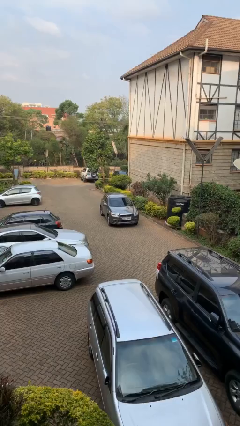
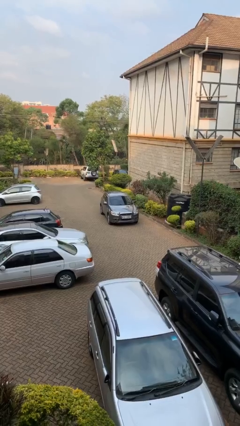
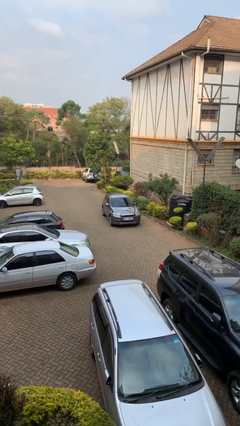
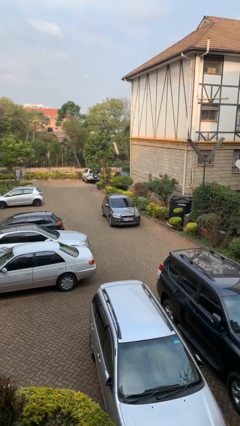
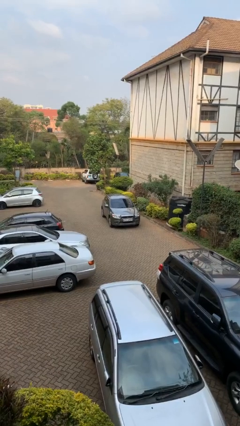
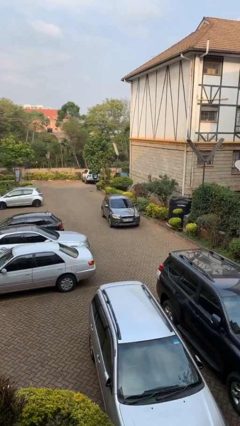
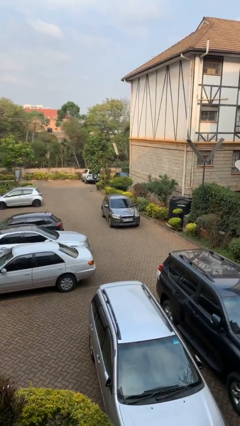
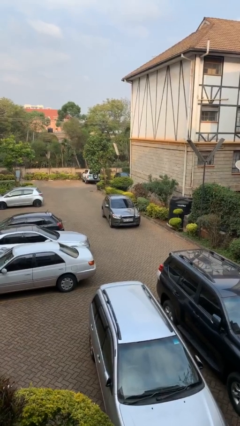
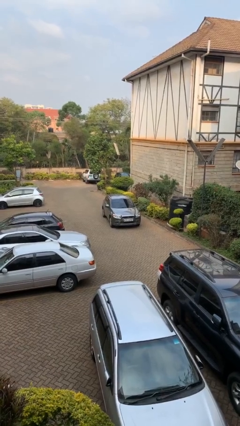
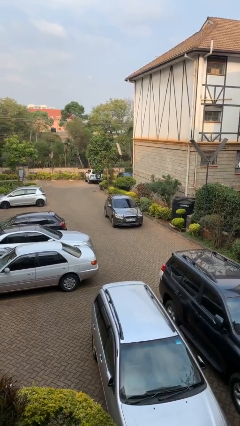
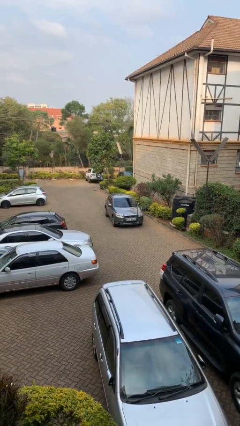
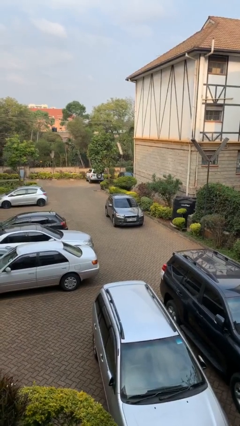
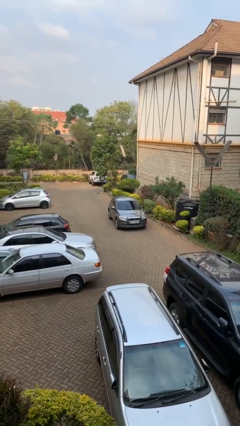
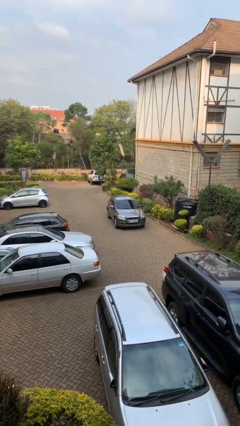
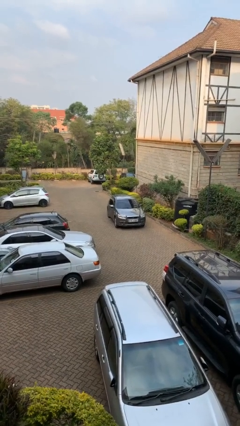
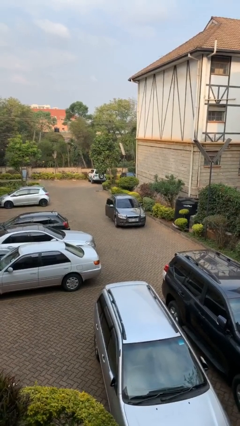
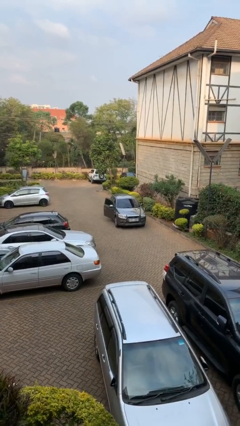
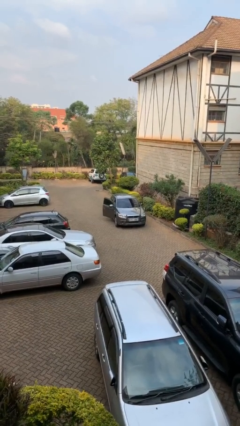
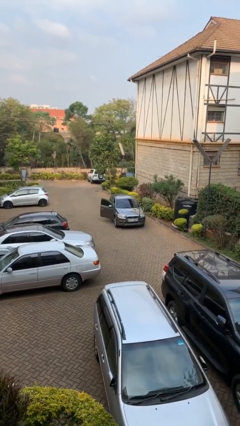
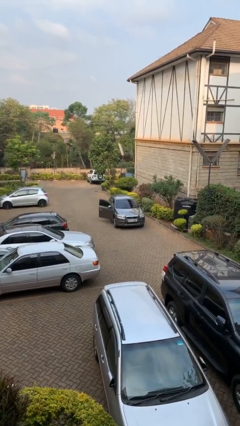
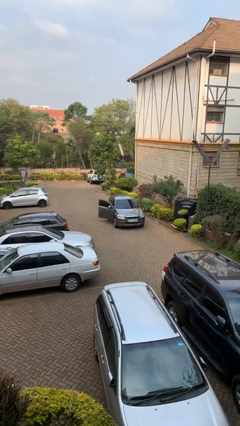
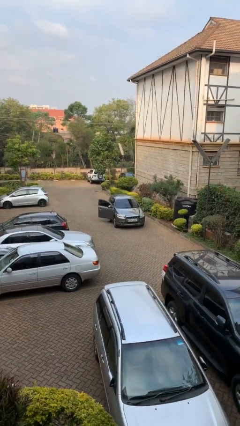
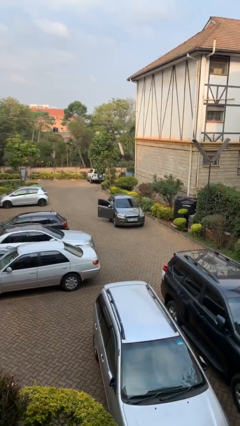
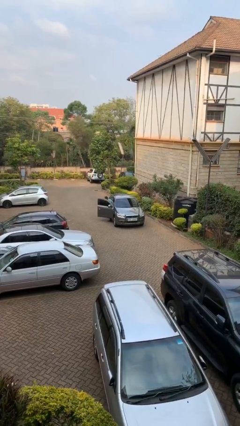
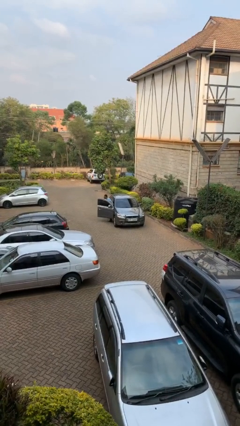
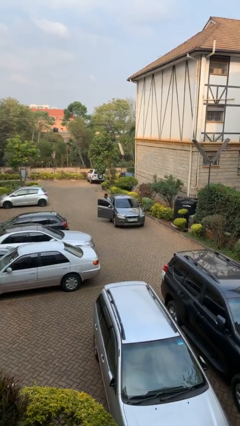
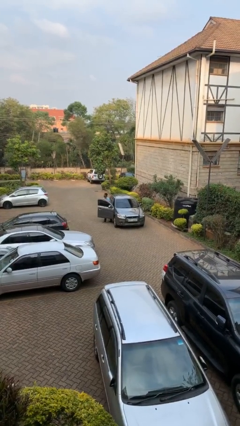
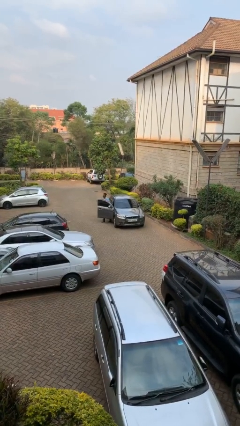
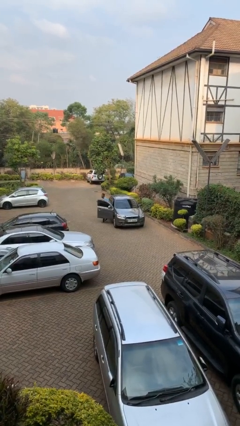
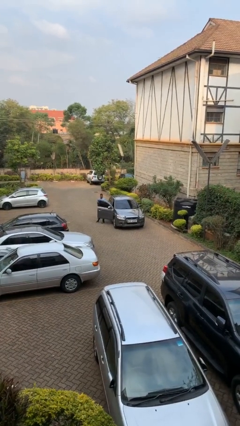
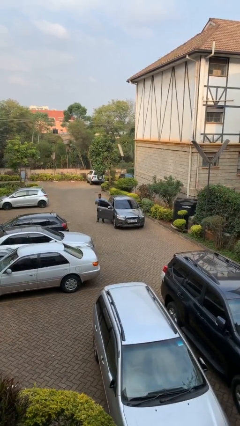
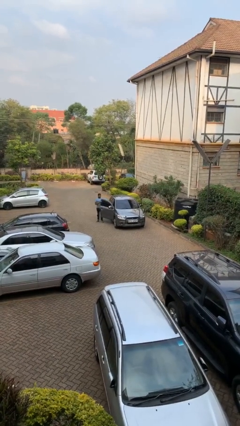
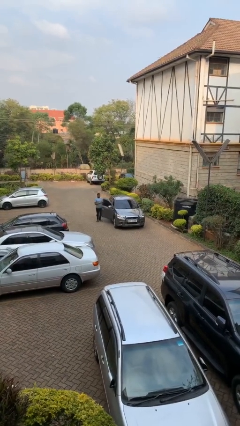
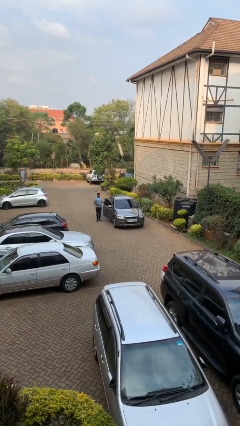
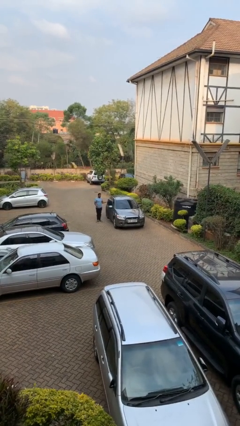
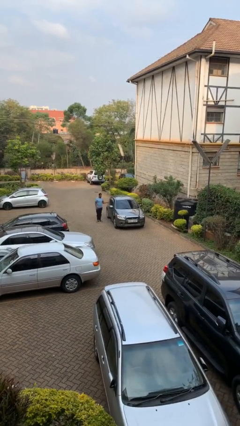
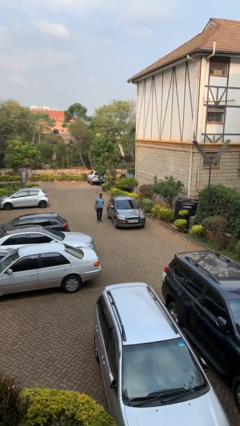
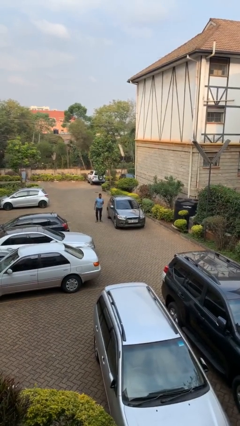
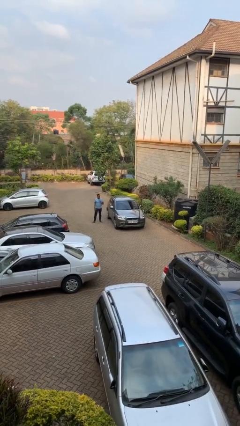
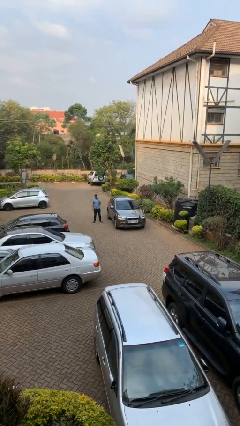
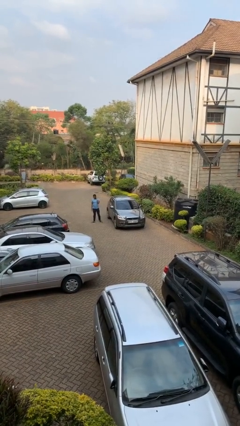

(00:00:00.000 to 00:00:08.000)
car drops off person

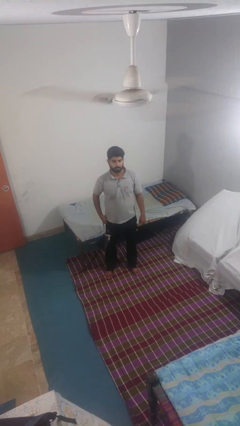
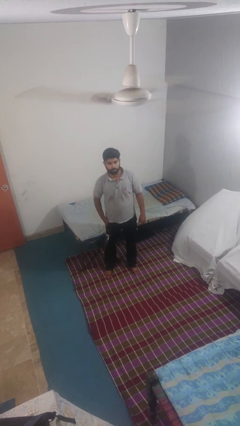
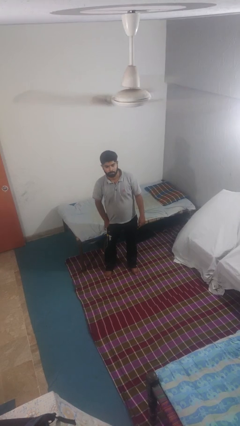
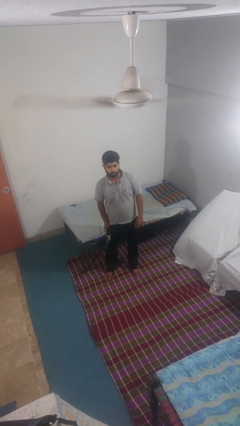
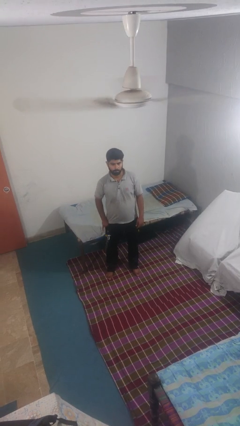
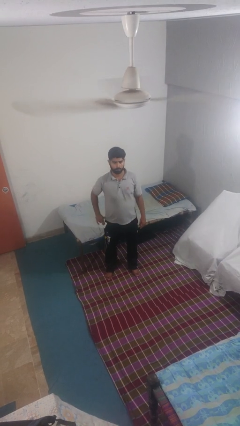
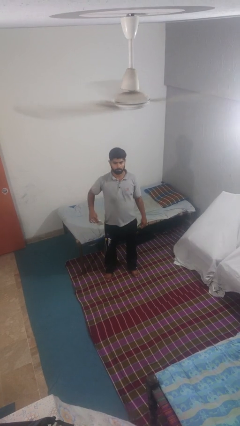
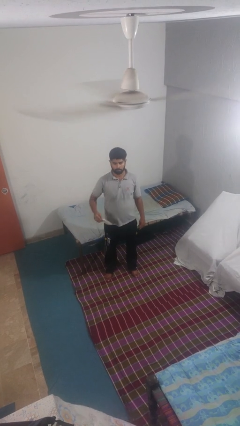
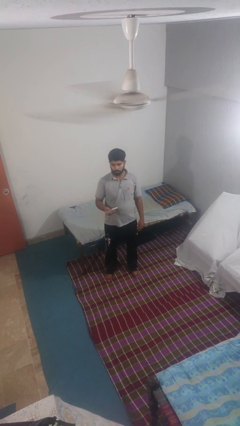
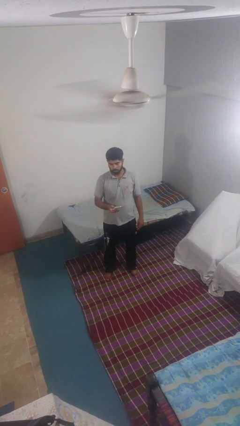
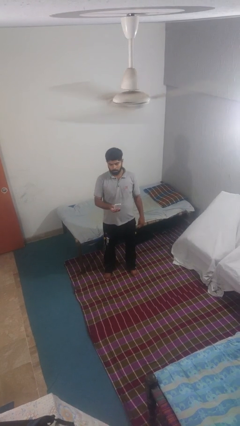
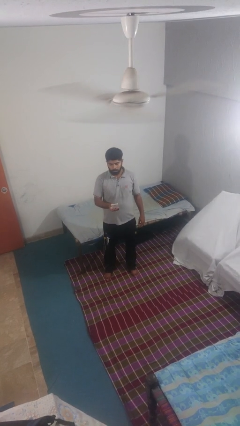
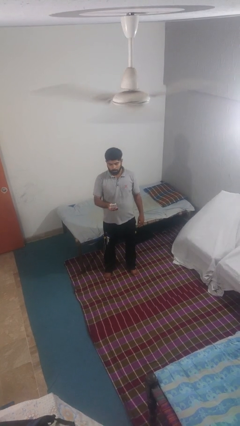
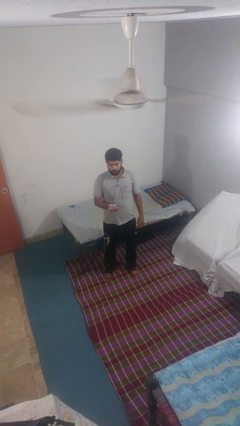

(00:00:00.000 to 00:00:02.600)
person takes phone from pocket

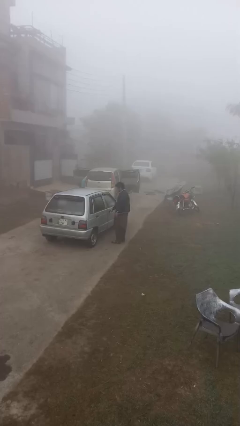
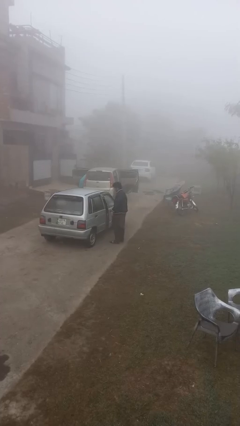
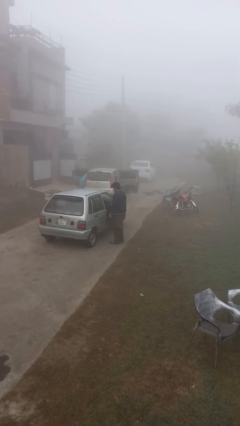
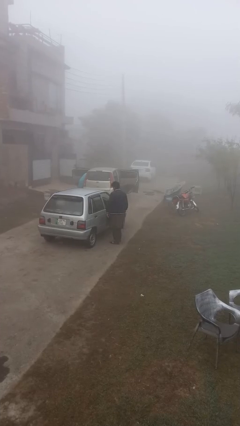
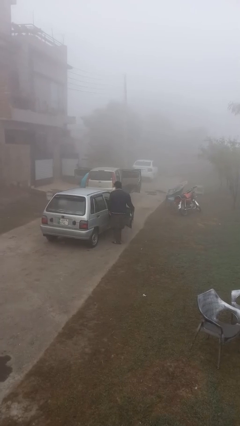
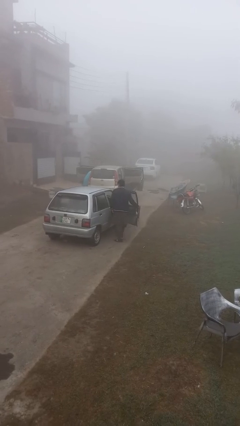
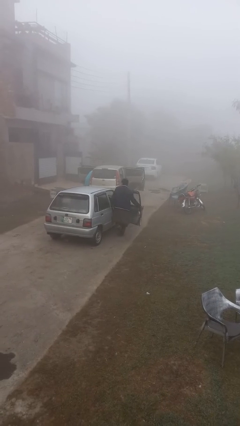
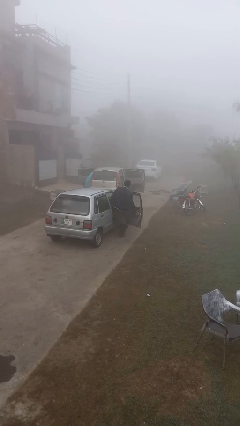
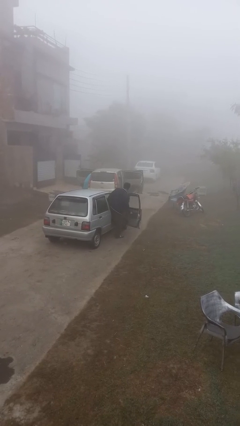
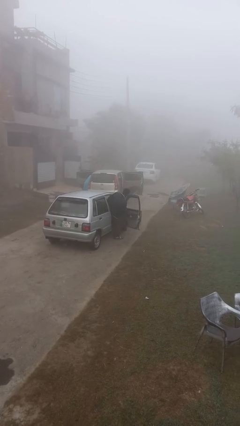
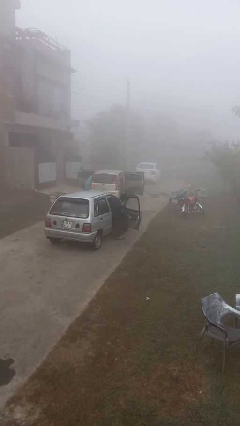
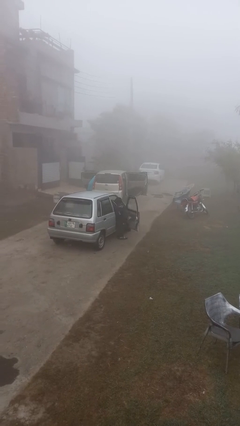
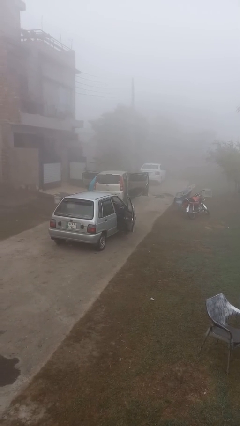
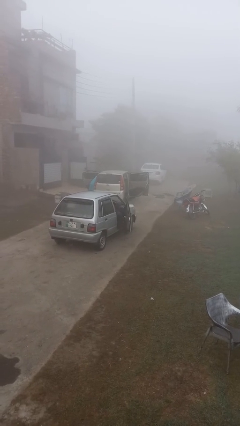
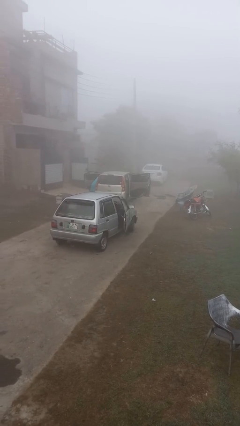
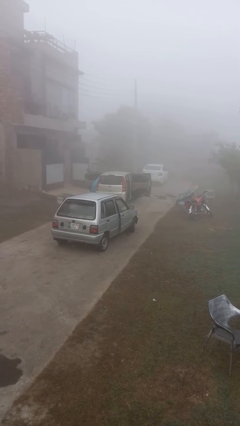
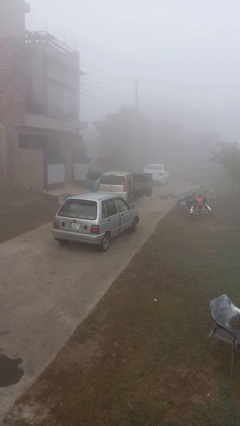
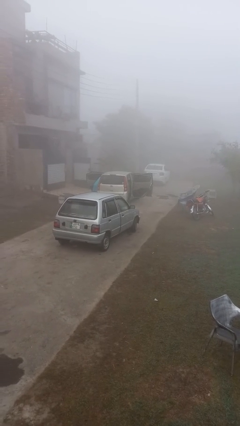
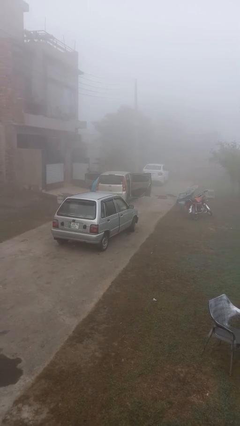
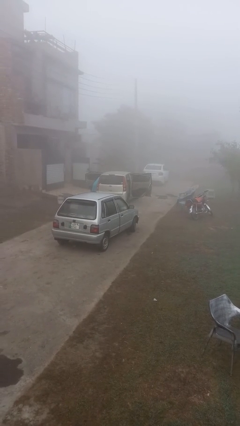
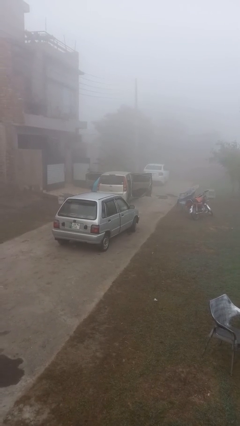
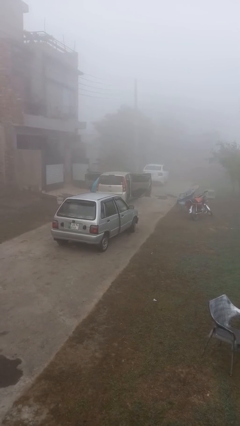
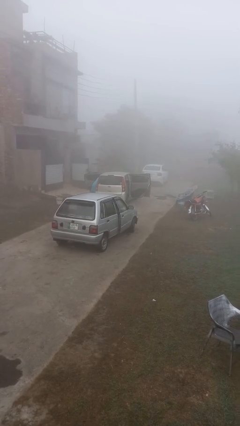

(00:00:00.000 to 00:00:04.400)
person enters car

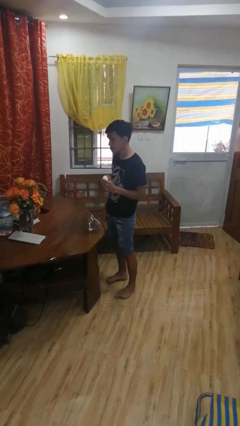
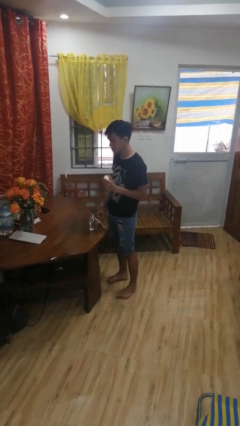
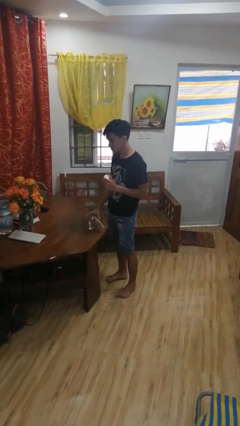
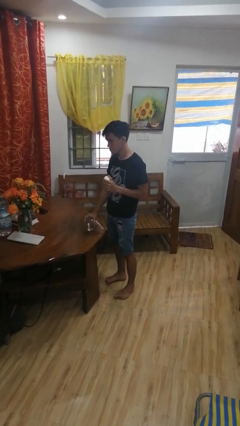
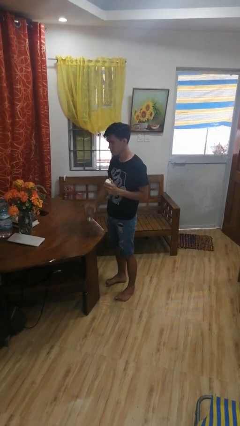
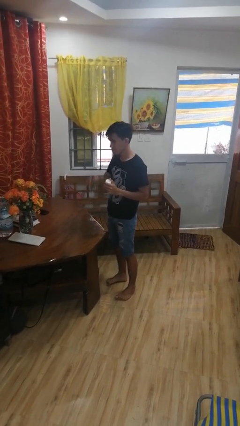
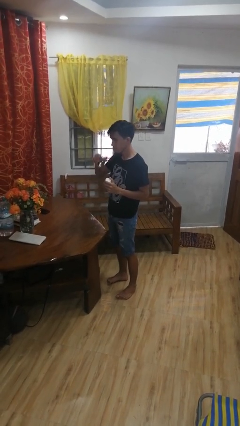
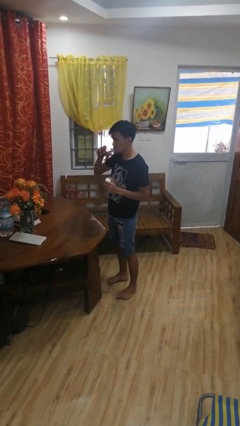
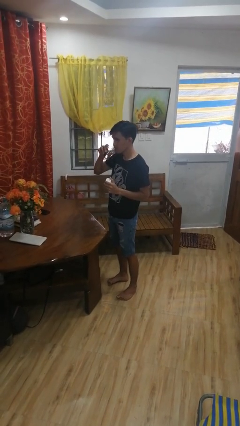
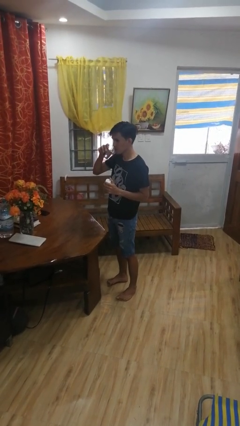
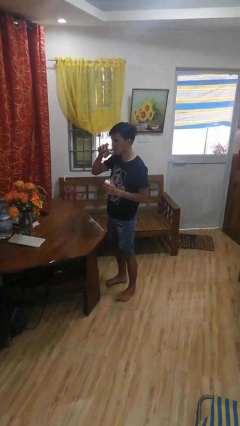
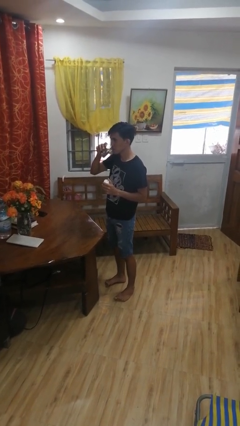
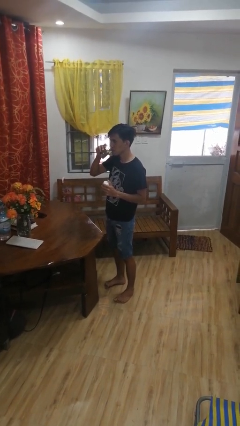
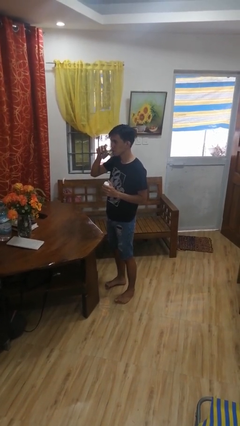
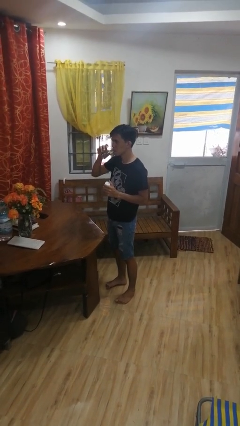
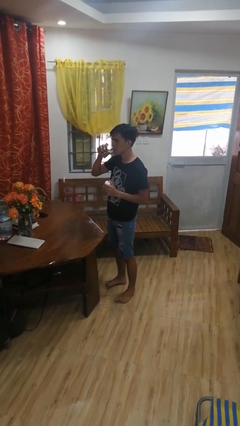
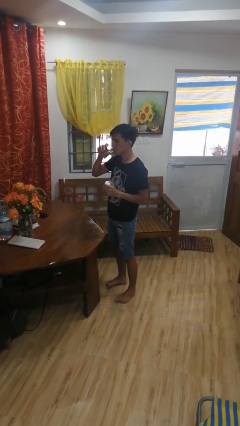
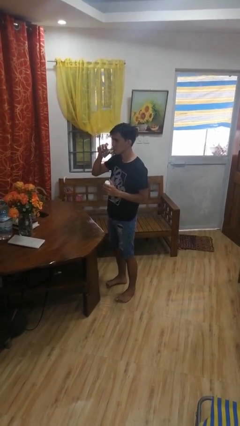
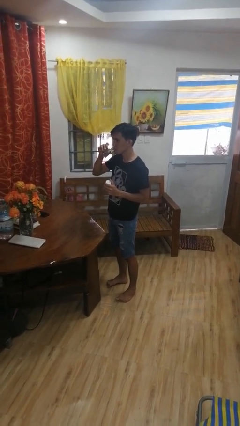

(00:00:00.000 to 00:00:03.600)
person drinks from cup
